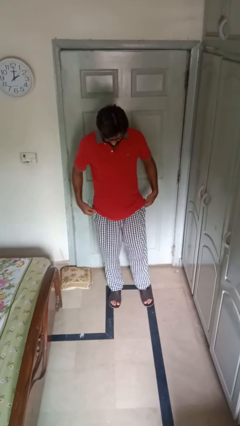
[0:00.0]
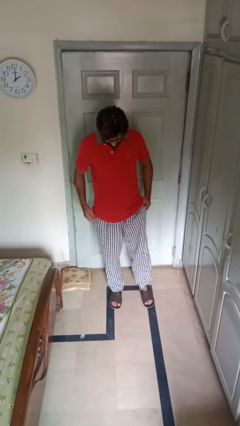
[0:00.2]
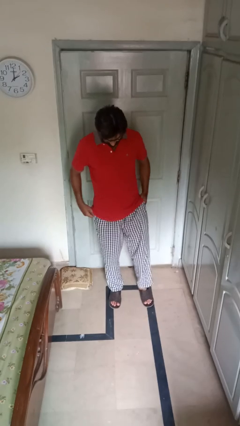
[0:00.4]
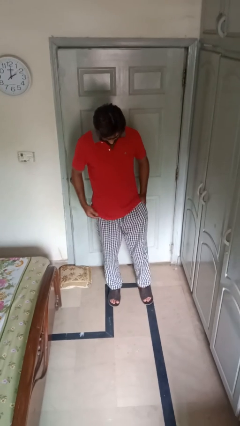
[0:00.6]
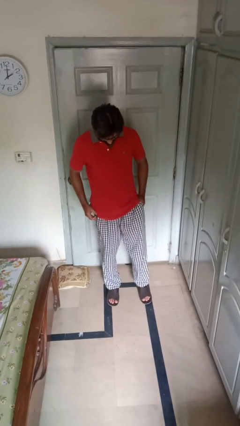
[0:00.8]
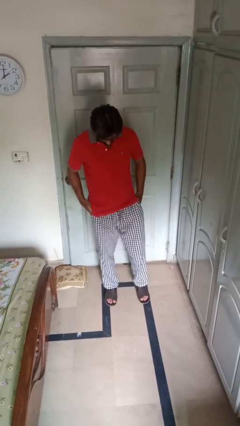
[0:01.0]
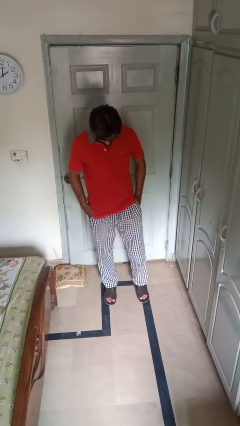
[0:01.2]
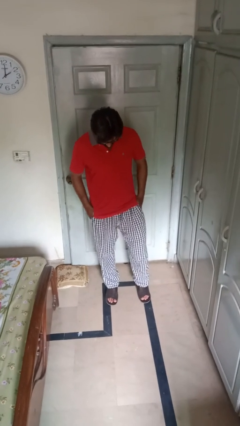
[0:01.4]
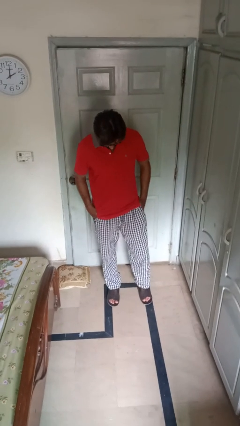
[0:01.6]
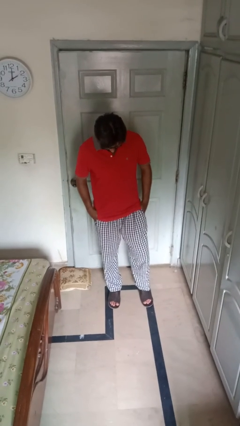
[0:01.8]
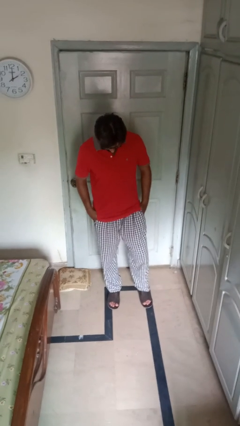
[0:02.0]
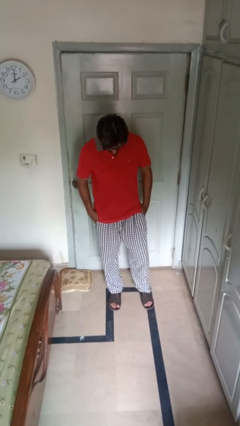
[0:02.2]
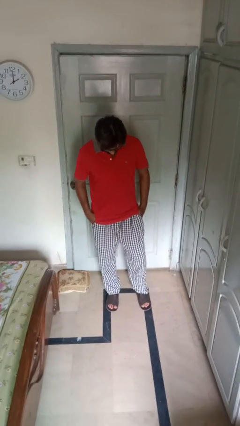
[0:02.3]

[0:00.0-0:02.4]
person puts hands in back pockets

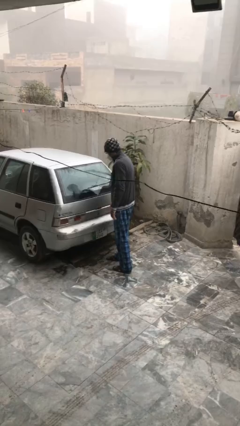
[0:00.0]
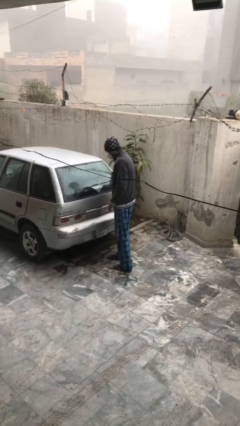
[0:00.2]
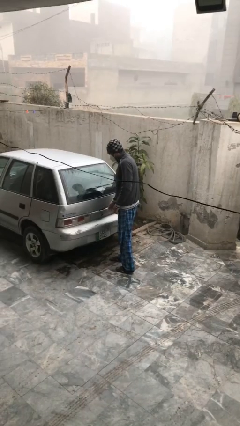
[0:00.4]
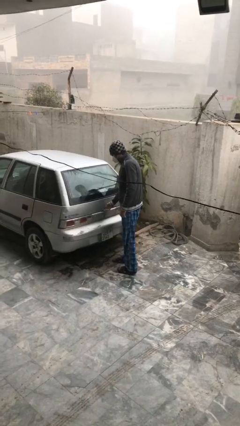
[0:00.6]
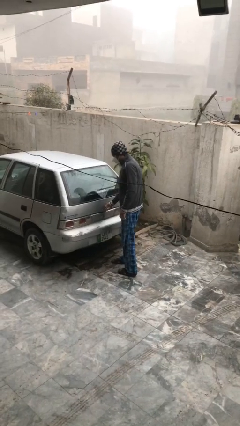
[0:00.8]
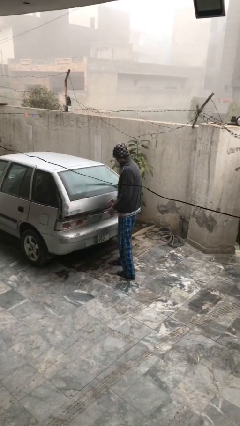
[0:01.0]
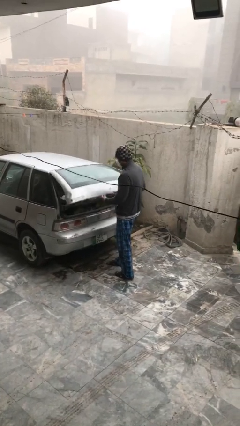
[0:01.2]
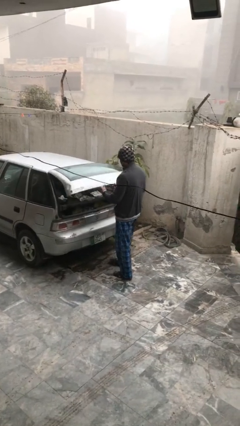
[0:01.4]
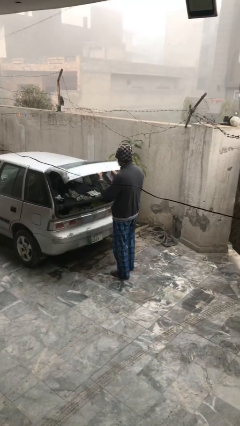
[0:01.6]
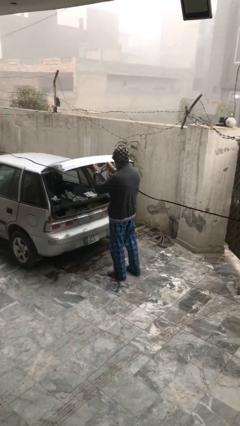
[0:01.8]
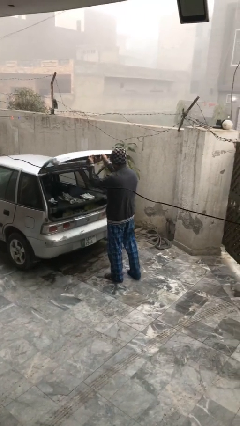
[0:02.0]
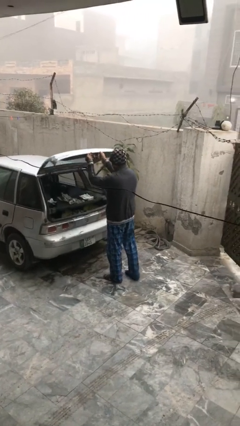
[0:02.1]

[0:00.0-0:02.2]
person opens car trunk

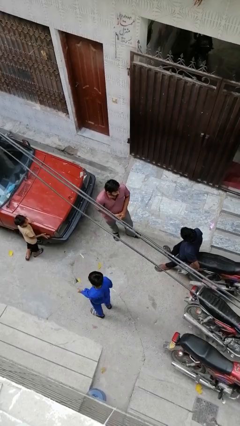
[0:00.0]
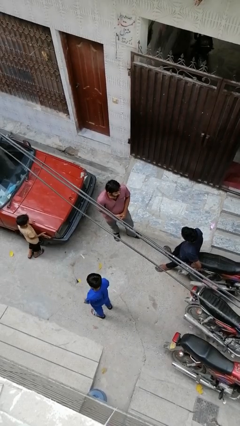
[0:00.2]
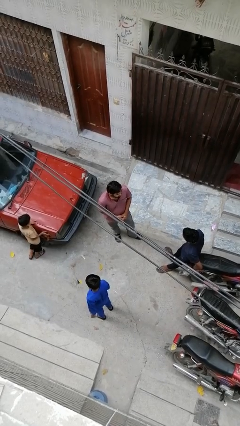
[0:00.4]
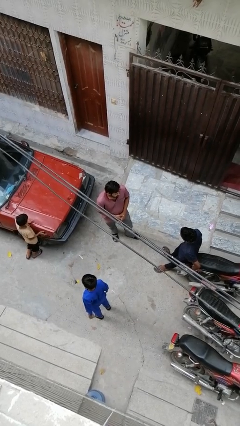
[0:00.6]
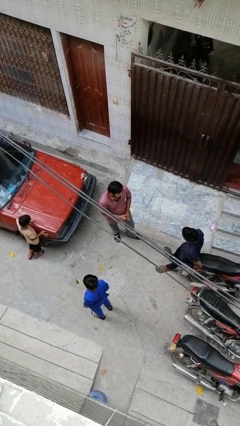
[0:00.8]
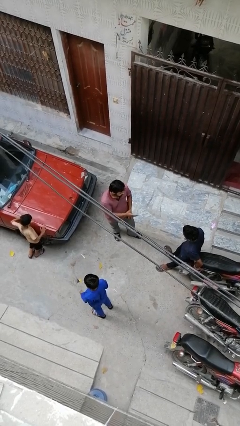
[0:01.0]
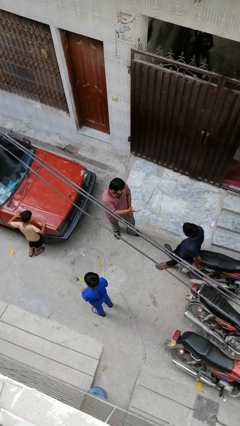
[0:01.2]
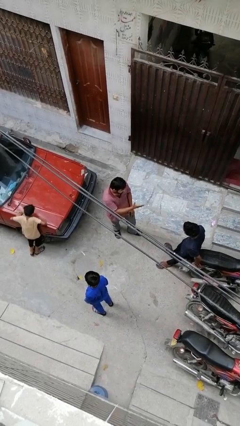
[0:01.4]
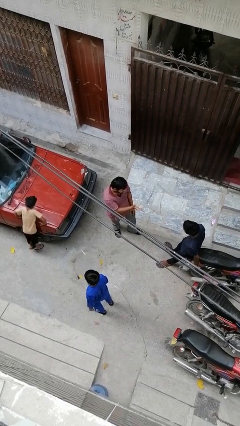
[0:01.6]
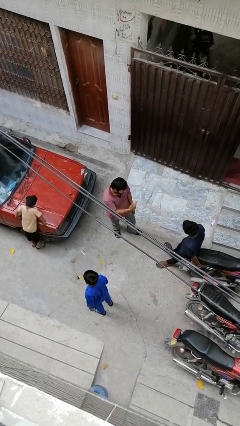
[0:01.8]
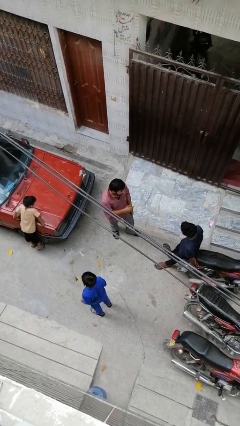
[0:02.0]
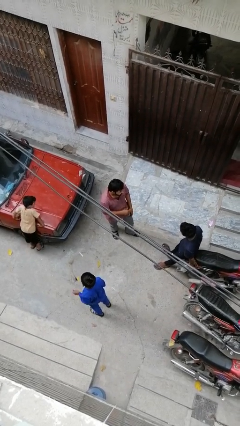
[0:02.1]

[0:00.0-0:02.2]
person talks to person

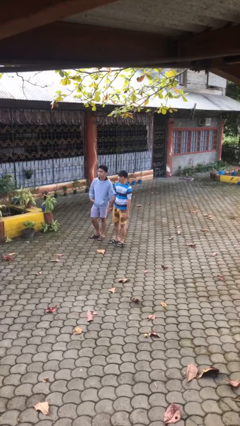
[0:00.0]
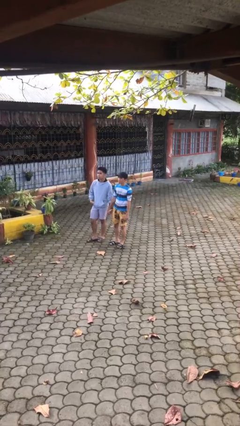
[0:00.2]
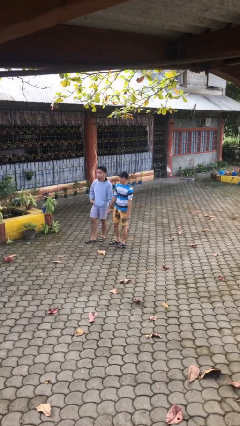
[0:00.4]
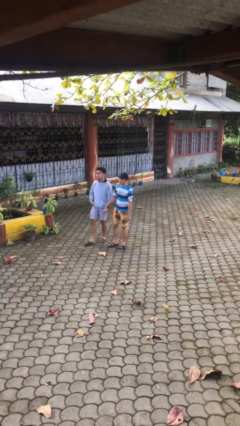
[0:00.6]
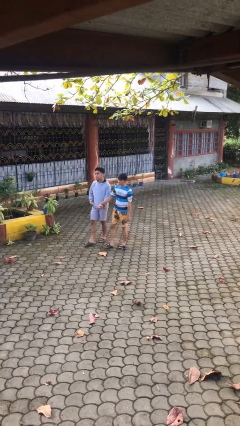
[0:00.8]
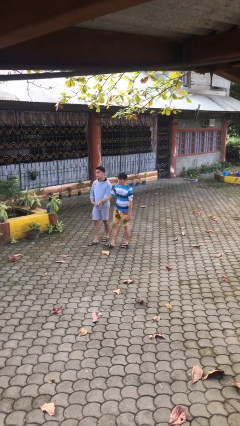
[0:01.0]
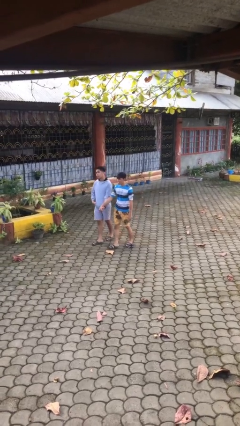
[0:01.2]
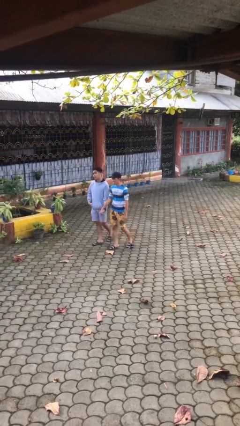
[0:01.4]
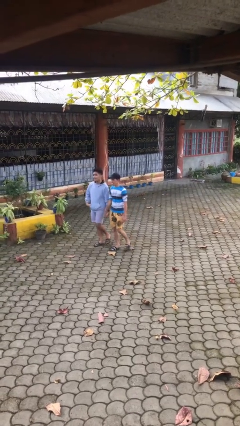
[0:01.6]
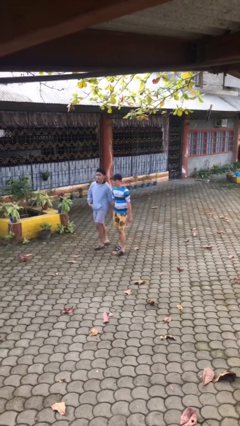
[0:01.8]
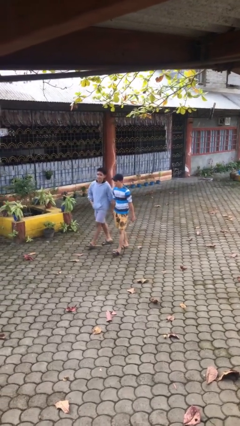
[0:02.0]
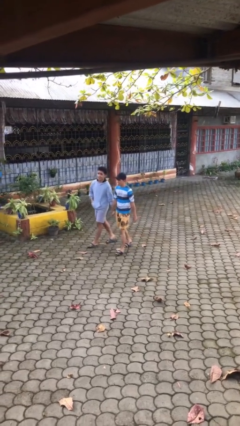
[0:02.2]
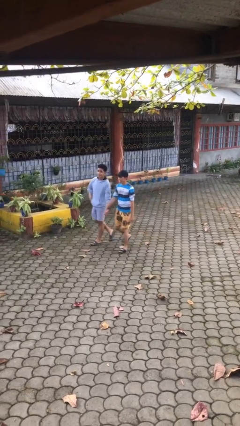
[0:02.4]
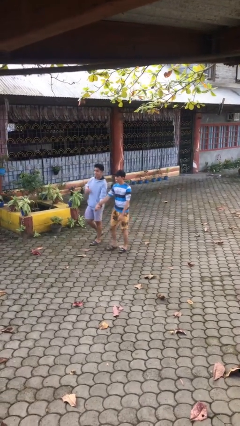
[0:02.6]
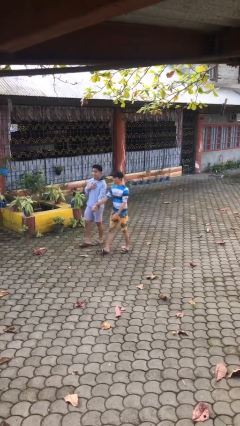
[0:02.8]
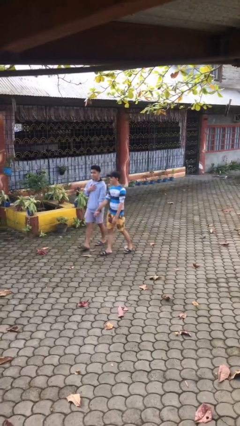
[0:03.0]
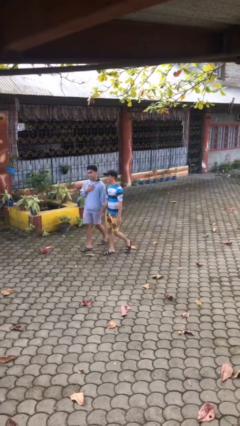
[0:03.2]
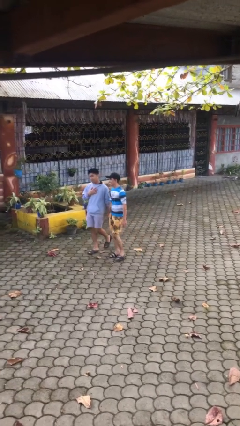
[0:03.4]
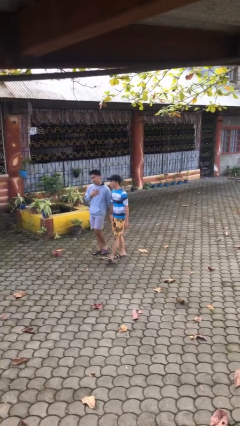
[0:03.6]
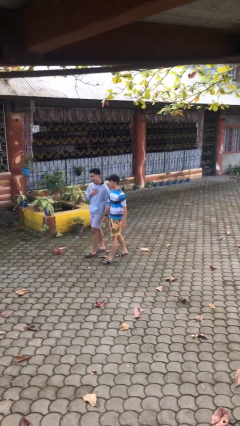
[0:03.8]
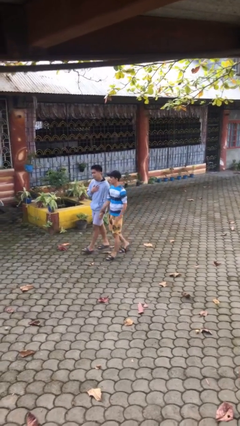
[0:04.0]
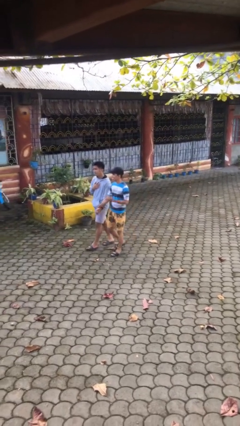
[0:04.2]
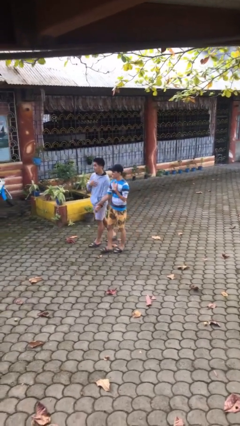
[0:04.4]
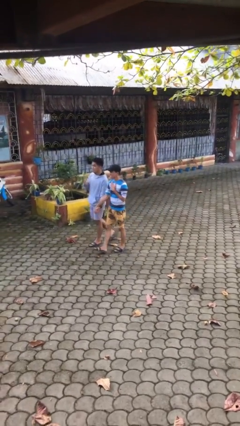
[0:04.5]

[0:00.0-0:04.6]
person holds hand

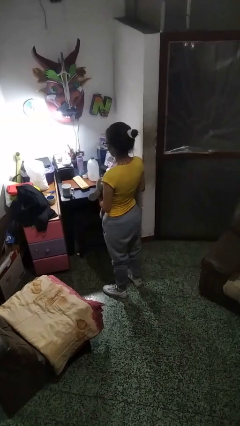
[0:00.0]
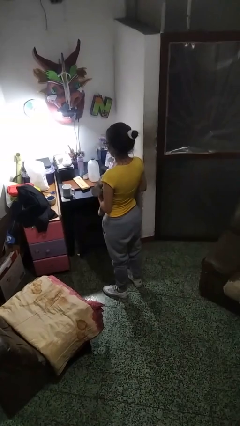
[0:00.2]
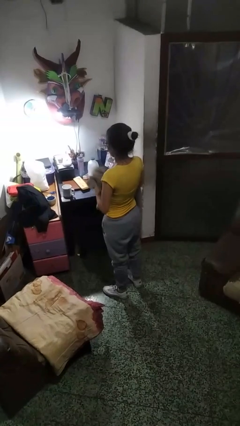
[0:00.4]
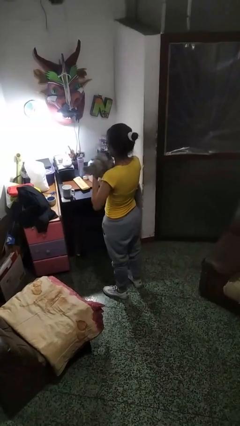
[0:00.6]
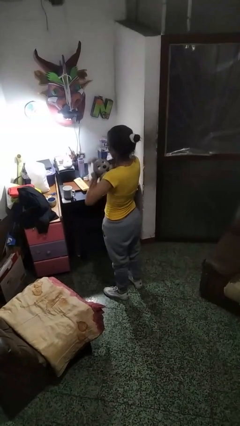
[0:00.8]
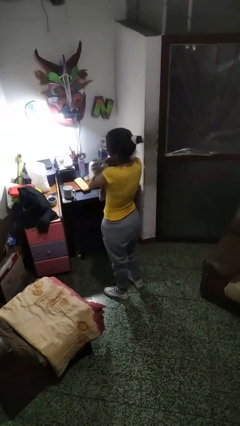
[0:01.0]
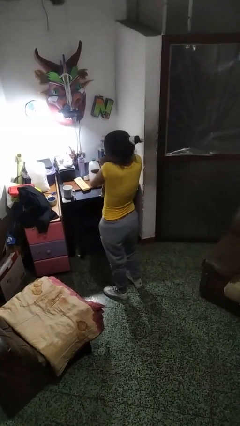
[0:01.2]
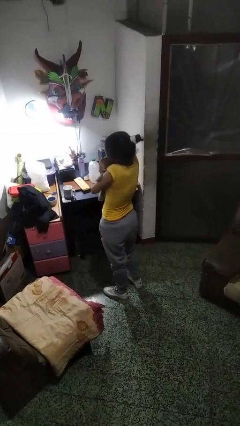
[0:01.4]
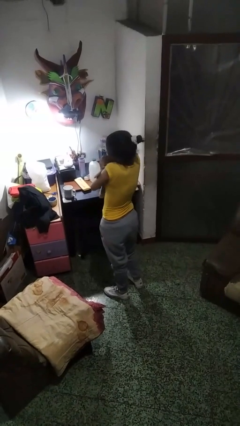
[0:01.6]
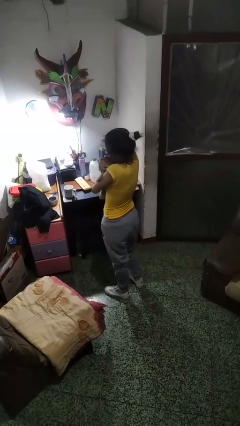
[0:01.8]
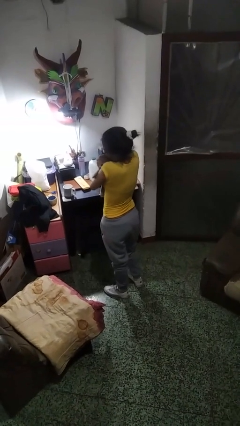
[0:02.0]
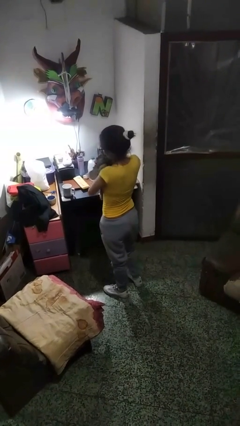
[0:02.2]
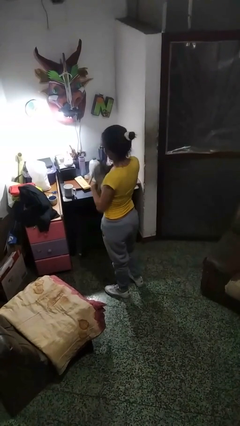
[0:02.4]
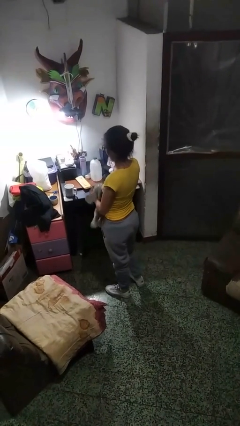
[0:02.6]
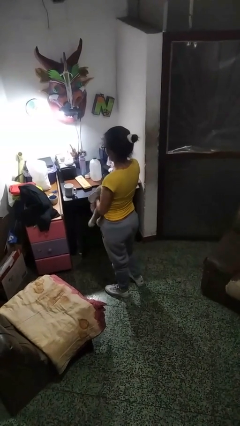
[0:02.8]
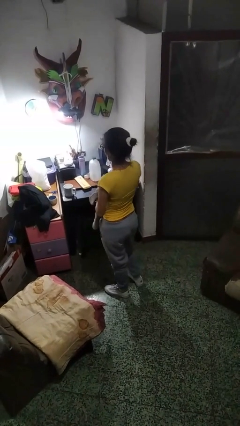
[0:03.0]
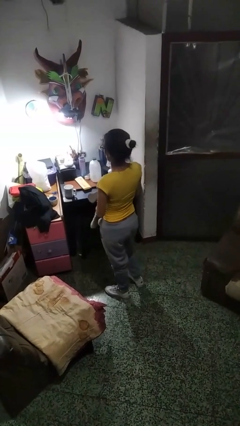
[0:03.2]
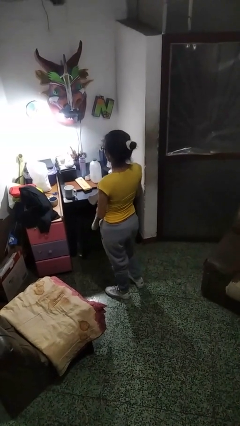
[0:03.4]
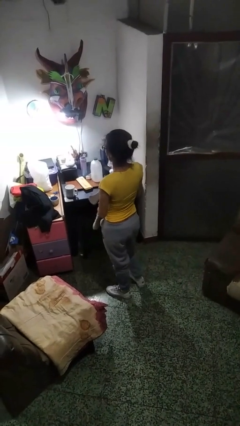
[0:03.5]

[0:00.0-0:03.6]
person hugs stuffed animal

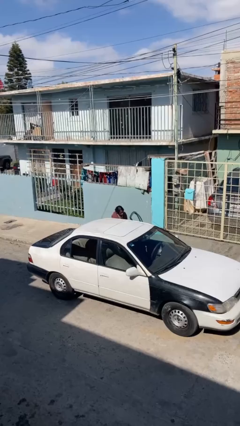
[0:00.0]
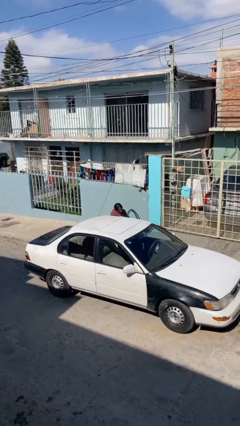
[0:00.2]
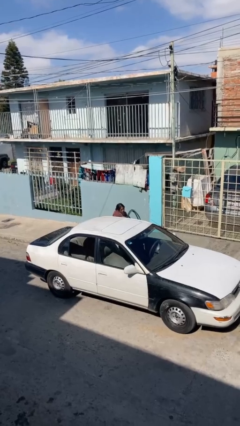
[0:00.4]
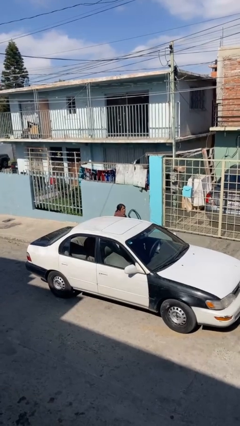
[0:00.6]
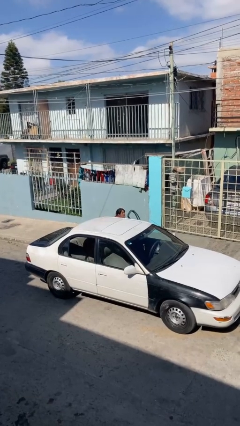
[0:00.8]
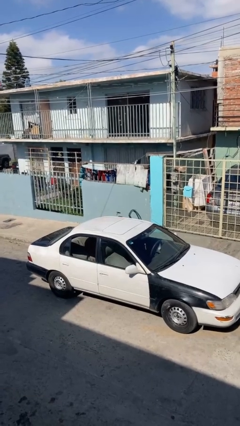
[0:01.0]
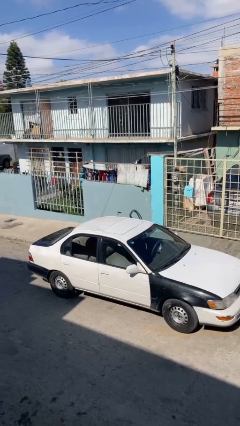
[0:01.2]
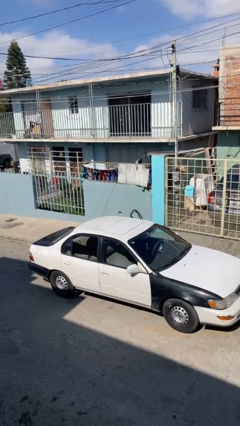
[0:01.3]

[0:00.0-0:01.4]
person enters car

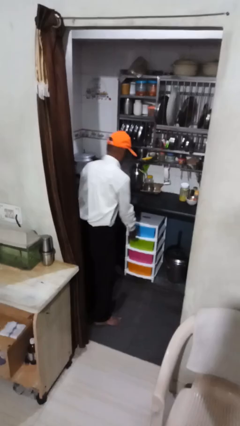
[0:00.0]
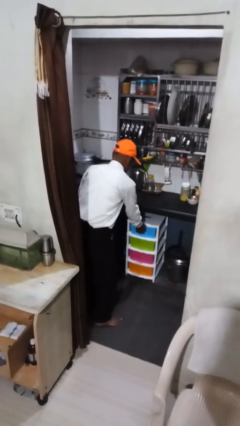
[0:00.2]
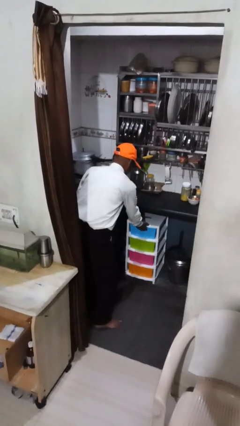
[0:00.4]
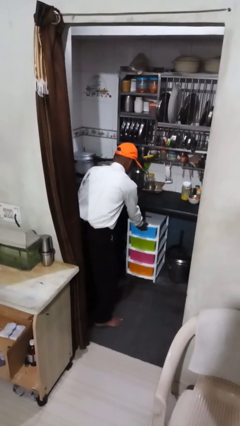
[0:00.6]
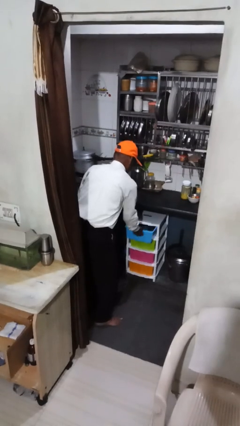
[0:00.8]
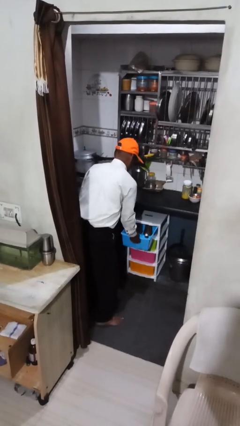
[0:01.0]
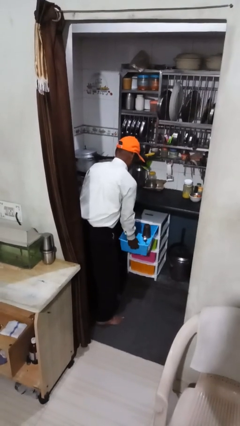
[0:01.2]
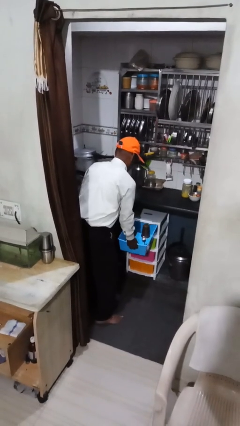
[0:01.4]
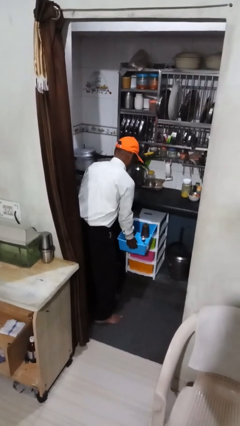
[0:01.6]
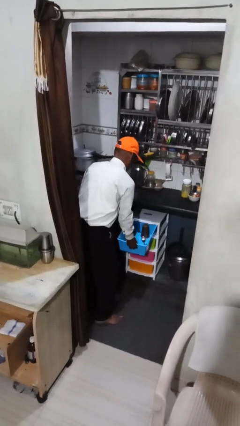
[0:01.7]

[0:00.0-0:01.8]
person opens kitchen drawer
